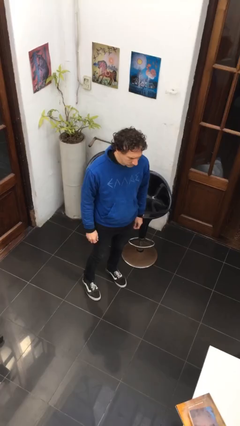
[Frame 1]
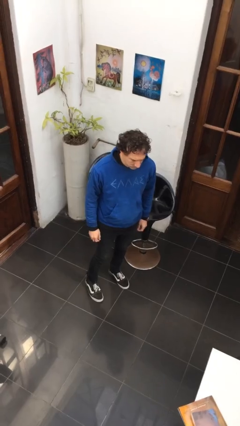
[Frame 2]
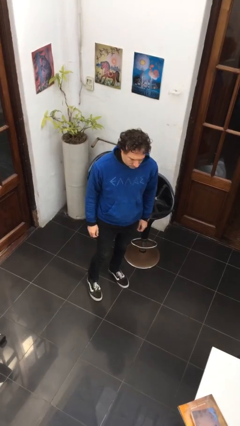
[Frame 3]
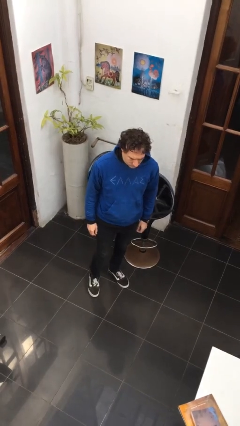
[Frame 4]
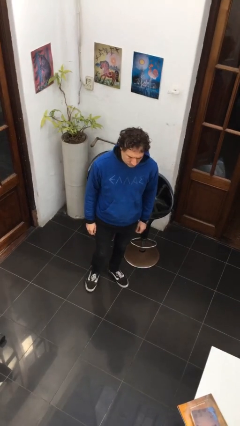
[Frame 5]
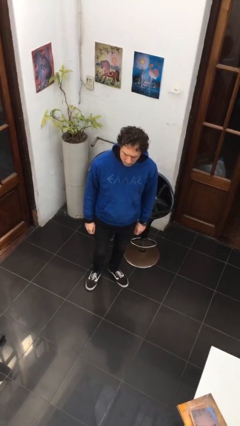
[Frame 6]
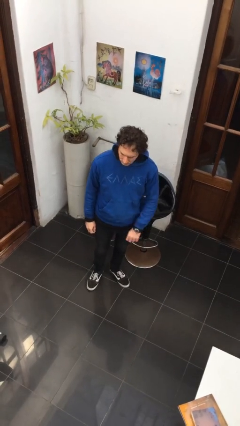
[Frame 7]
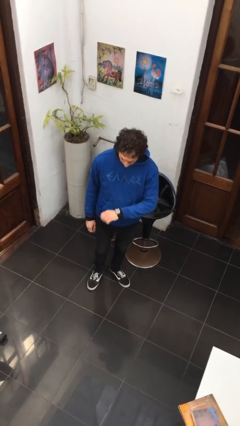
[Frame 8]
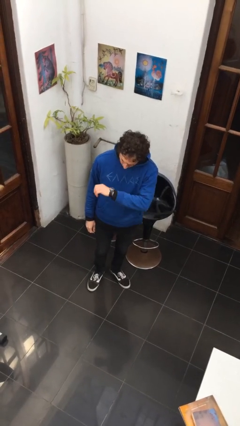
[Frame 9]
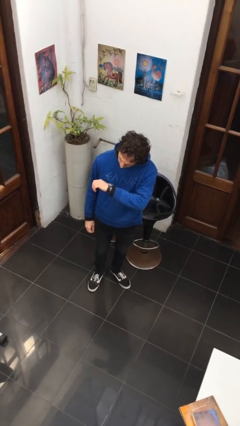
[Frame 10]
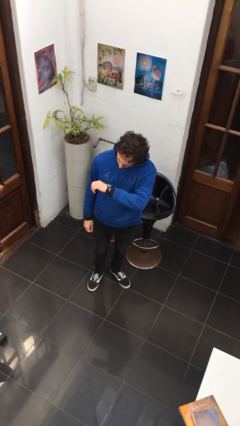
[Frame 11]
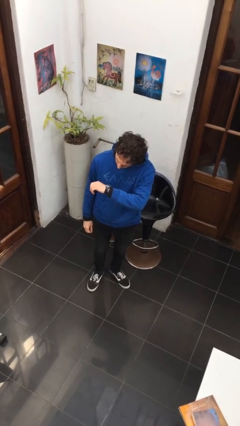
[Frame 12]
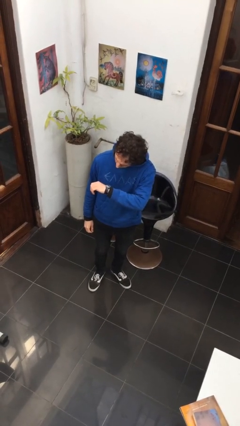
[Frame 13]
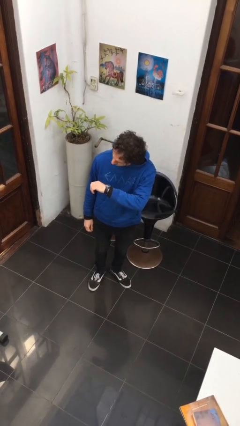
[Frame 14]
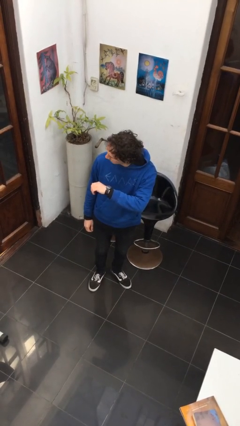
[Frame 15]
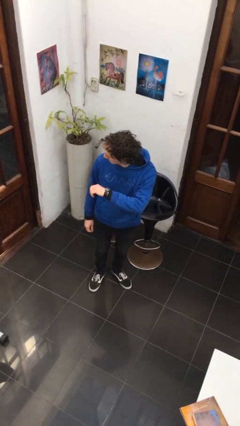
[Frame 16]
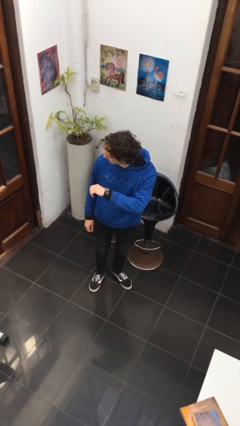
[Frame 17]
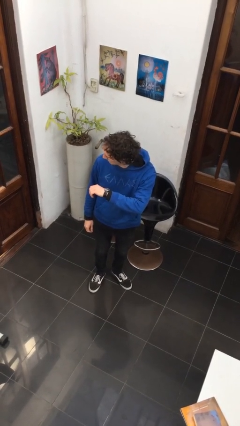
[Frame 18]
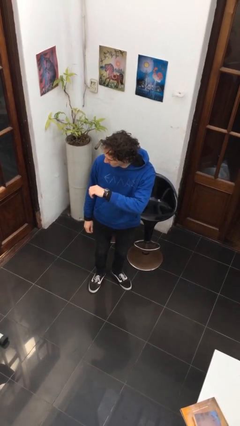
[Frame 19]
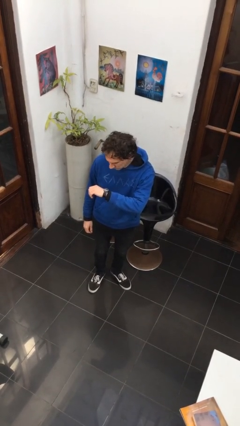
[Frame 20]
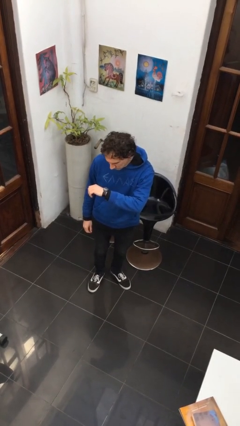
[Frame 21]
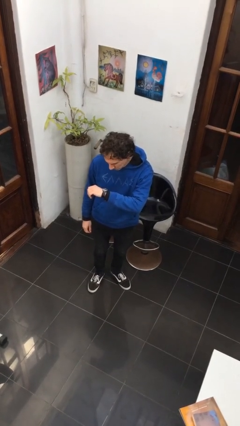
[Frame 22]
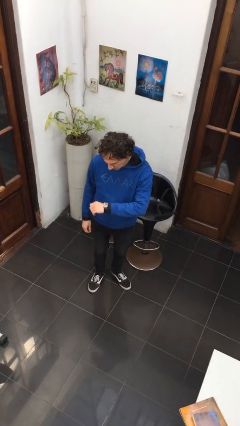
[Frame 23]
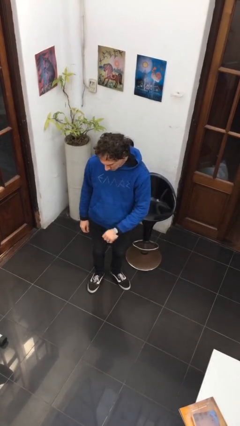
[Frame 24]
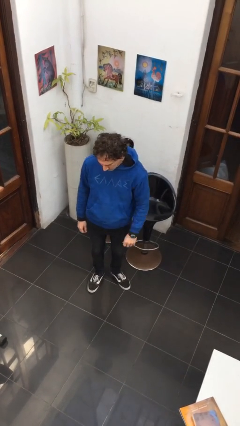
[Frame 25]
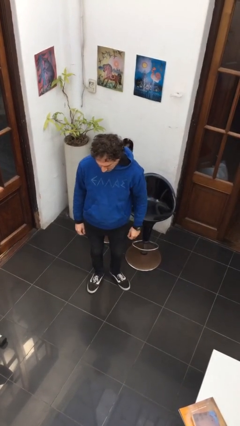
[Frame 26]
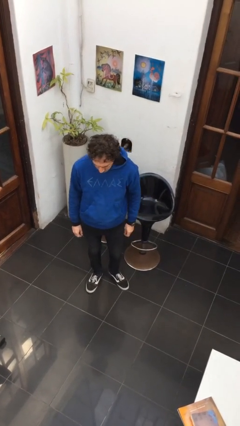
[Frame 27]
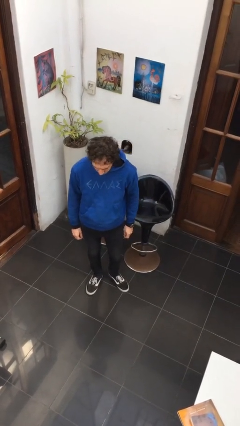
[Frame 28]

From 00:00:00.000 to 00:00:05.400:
person looks at wristwatch

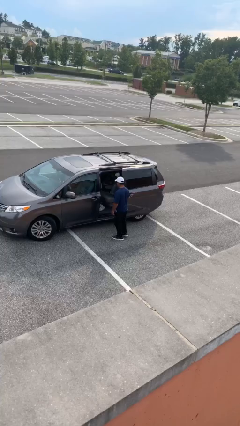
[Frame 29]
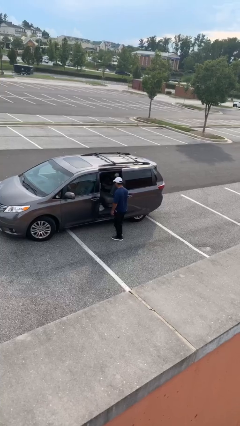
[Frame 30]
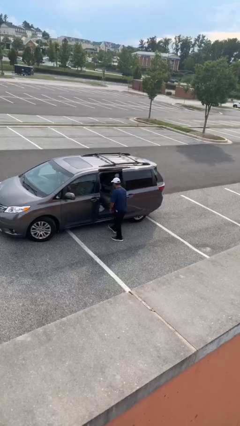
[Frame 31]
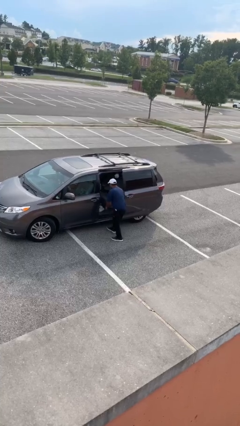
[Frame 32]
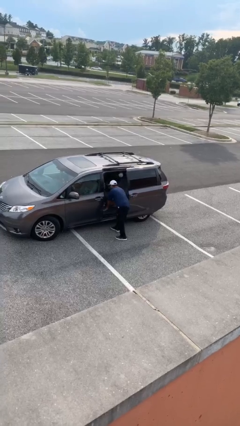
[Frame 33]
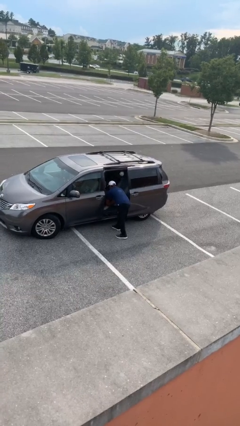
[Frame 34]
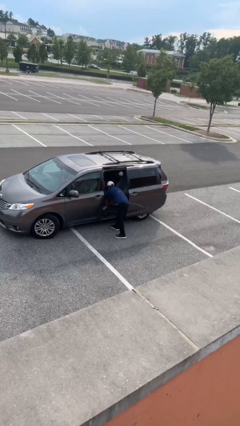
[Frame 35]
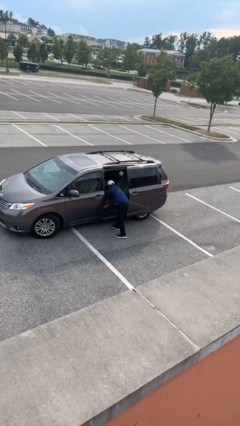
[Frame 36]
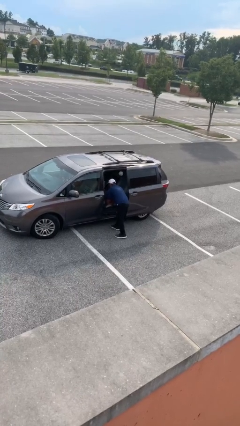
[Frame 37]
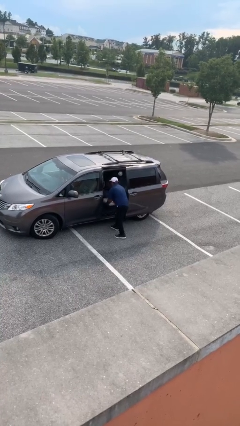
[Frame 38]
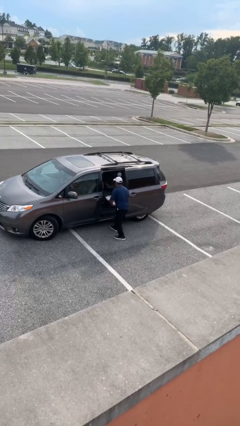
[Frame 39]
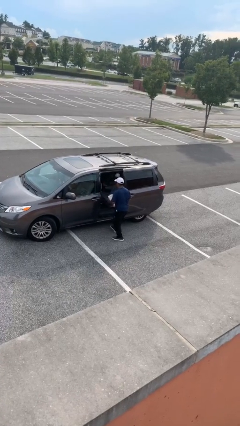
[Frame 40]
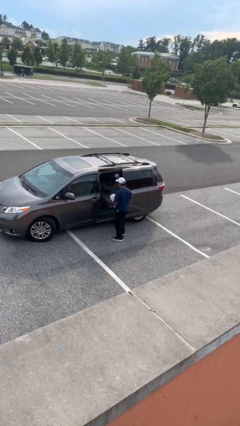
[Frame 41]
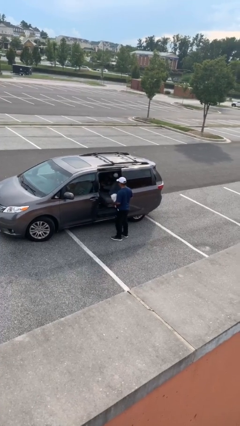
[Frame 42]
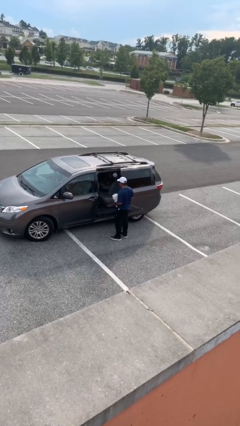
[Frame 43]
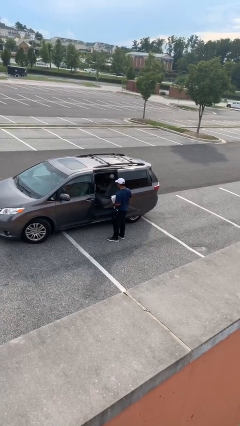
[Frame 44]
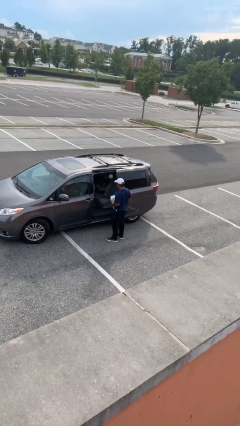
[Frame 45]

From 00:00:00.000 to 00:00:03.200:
person unloads car

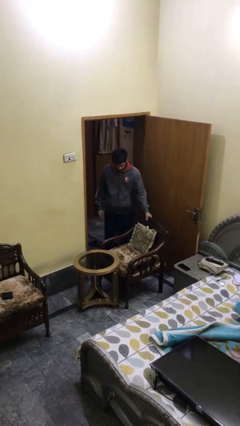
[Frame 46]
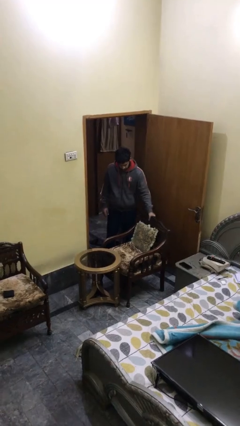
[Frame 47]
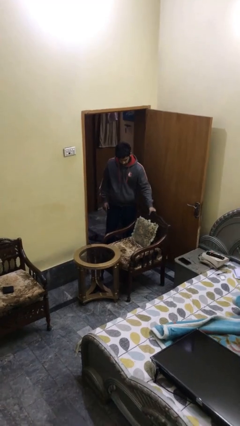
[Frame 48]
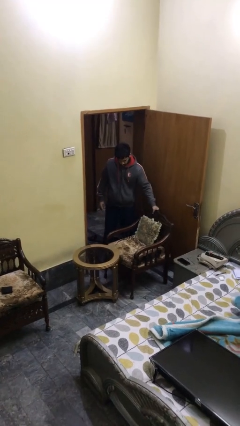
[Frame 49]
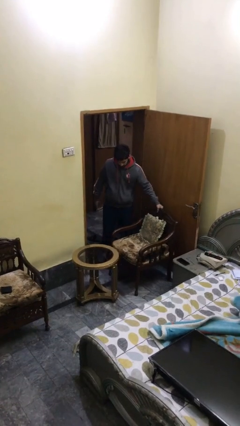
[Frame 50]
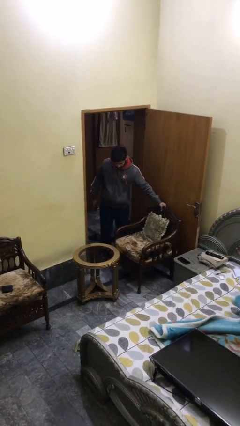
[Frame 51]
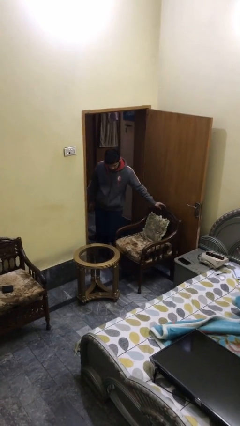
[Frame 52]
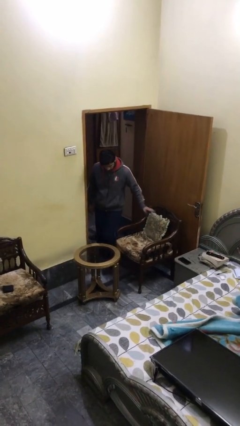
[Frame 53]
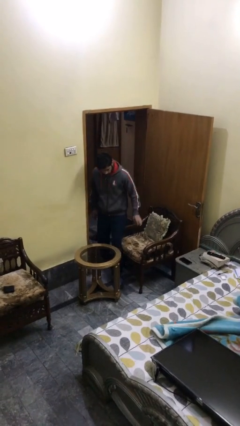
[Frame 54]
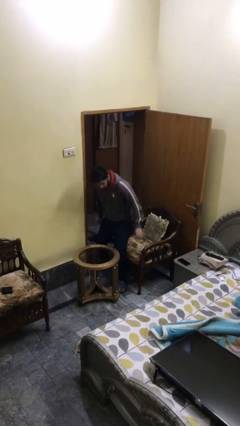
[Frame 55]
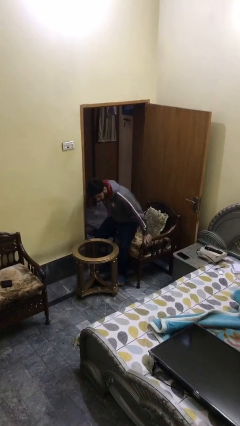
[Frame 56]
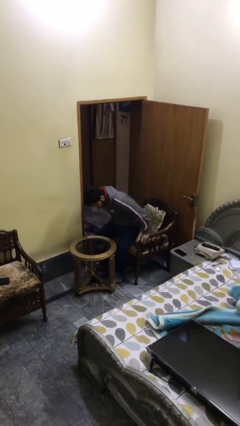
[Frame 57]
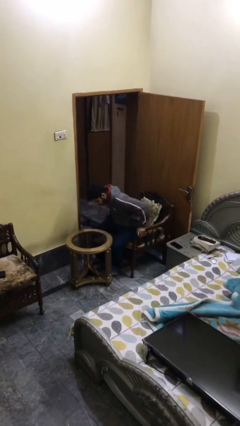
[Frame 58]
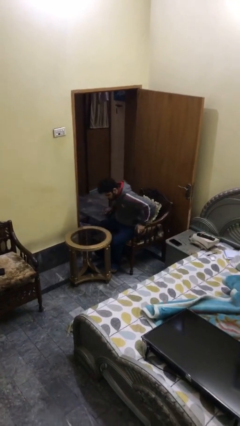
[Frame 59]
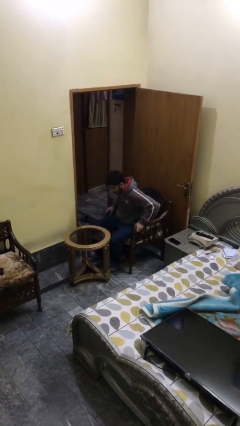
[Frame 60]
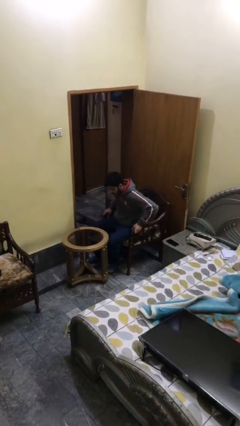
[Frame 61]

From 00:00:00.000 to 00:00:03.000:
person sits down

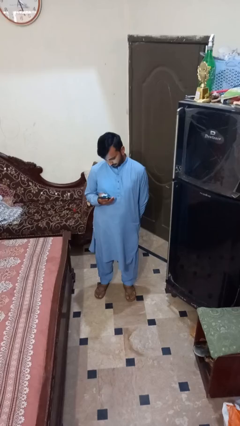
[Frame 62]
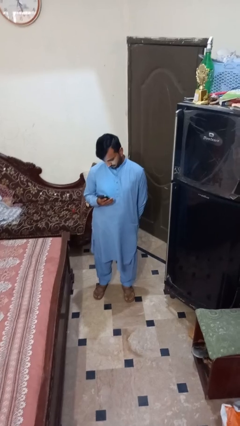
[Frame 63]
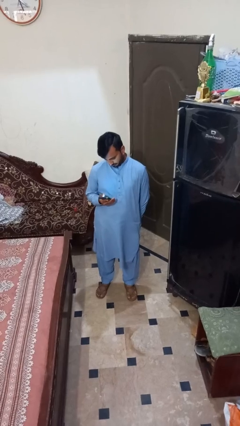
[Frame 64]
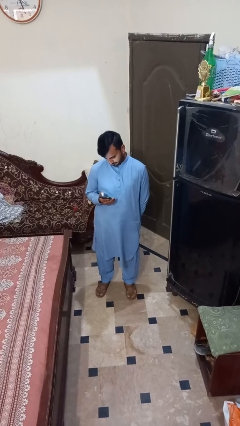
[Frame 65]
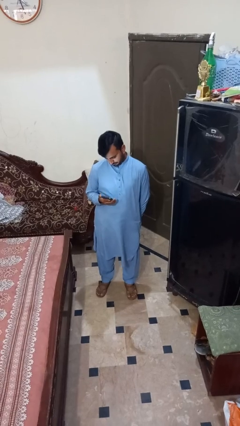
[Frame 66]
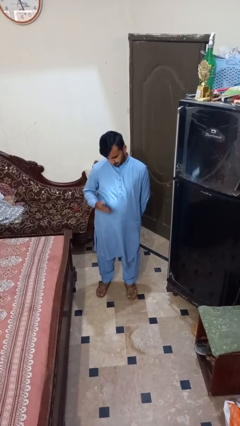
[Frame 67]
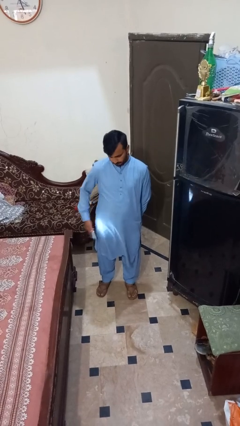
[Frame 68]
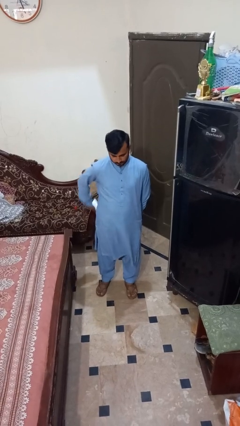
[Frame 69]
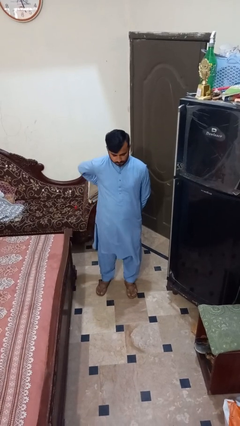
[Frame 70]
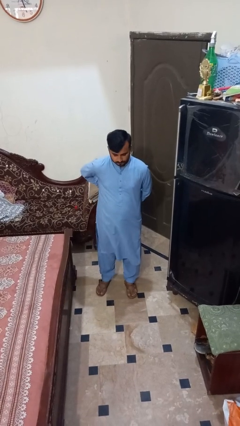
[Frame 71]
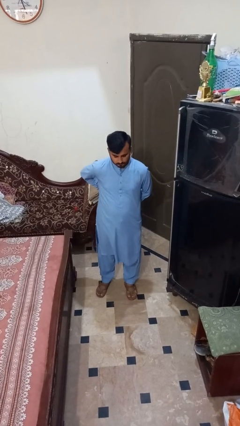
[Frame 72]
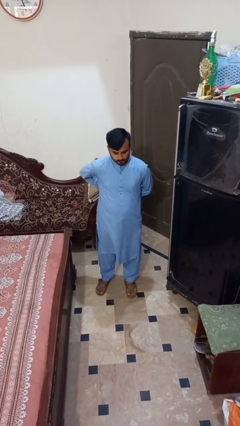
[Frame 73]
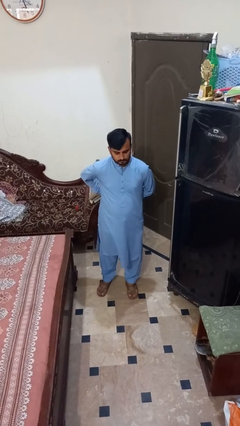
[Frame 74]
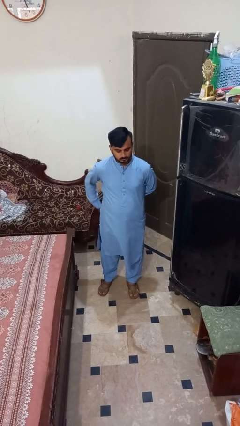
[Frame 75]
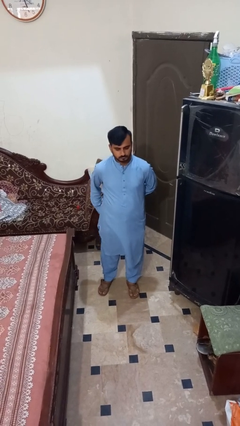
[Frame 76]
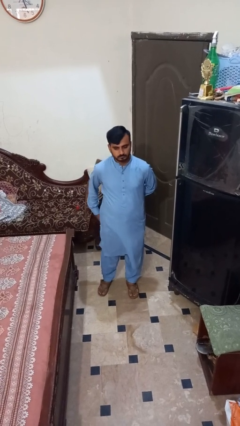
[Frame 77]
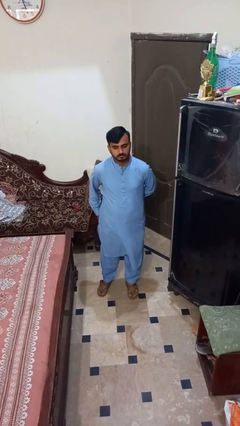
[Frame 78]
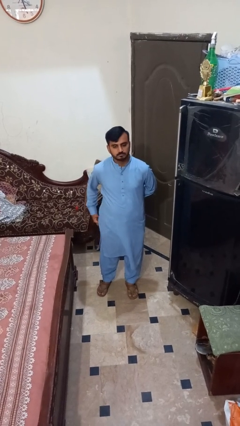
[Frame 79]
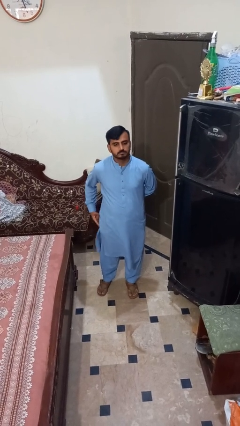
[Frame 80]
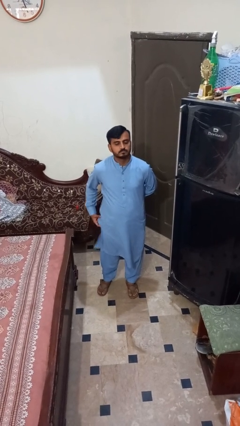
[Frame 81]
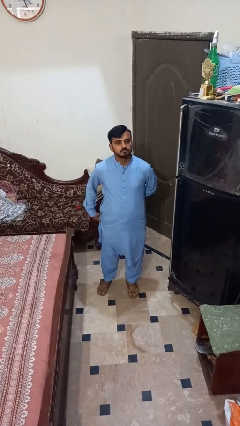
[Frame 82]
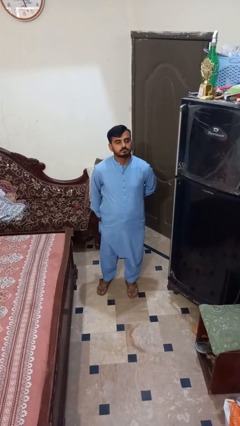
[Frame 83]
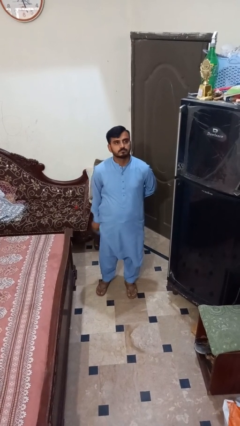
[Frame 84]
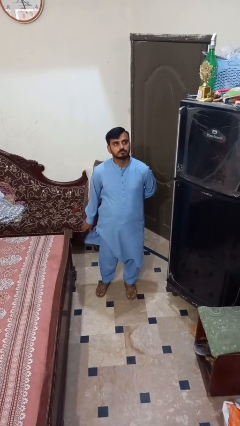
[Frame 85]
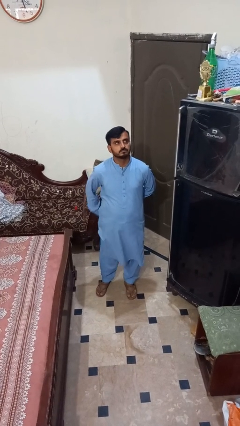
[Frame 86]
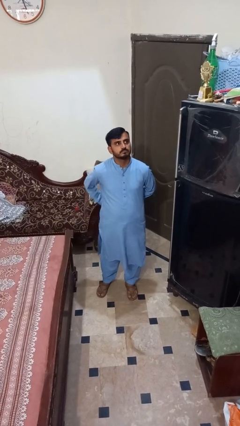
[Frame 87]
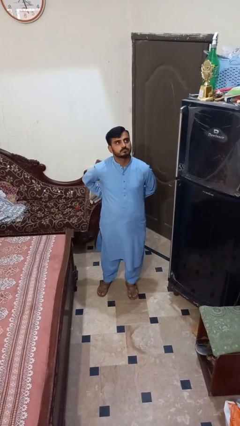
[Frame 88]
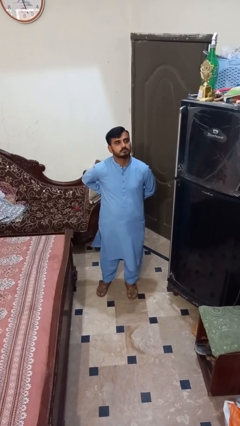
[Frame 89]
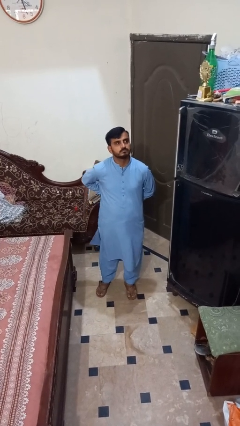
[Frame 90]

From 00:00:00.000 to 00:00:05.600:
person puts phone into pocket

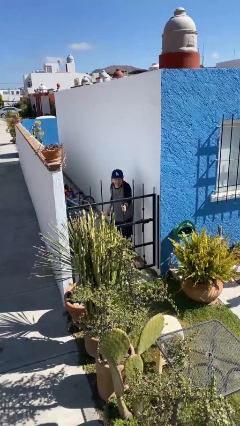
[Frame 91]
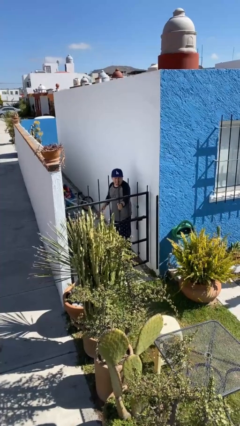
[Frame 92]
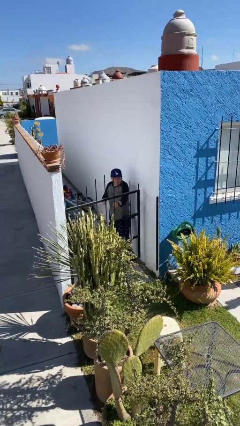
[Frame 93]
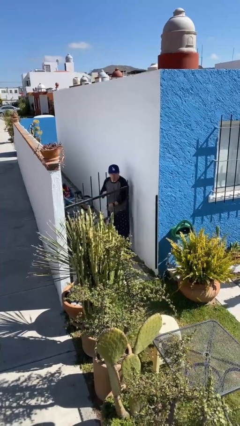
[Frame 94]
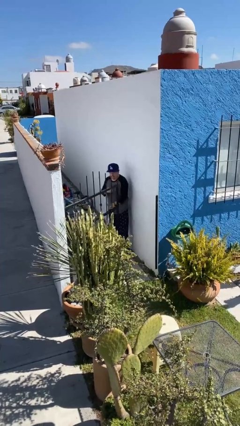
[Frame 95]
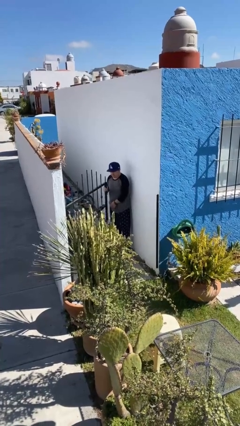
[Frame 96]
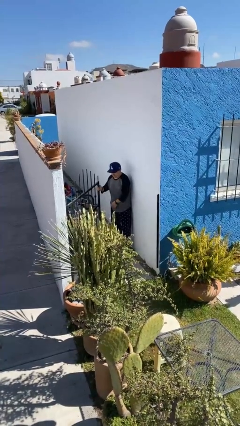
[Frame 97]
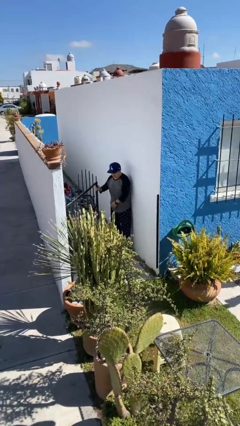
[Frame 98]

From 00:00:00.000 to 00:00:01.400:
person opens facility door
